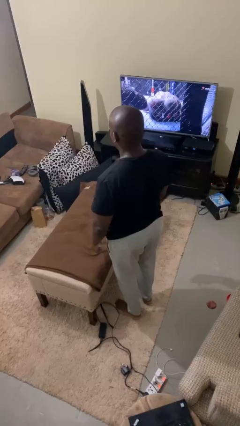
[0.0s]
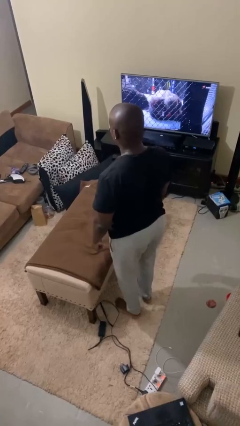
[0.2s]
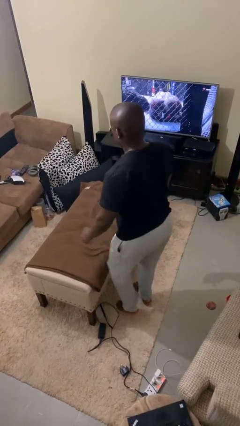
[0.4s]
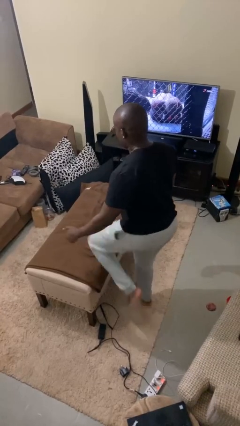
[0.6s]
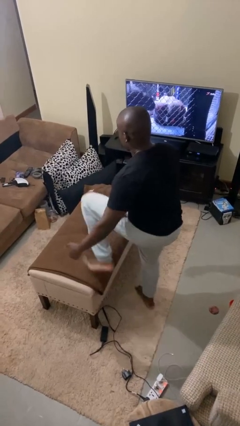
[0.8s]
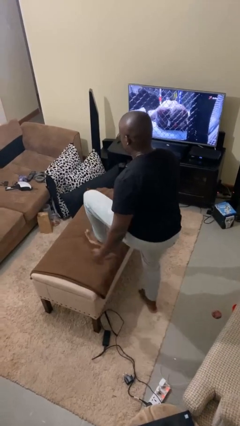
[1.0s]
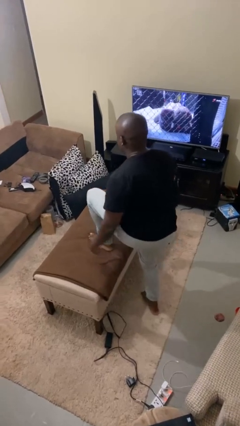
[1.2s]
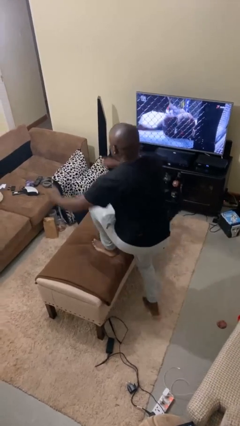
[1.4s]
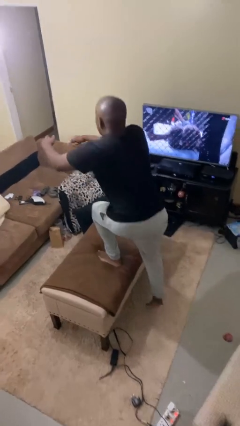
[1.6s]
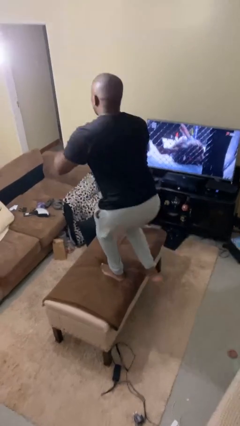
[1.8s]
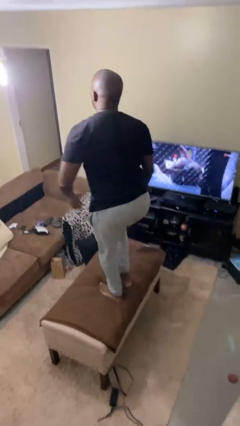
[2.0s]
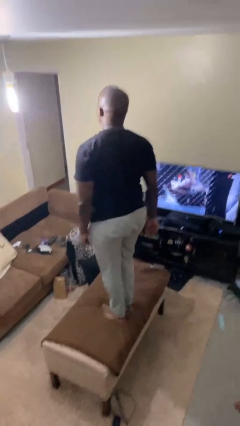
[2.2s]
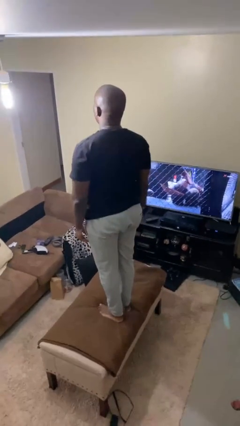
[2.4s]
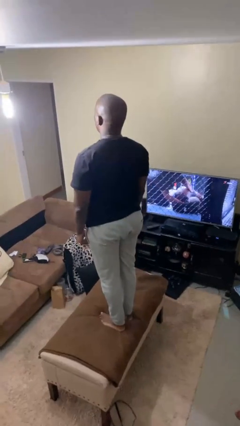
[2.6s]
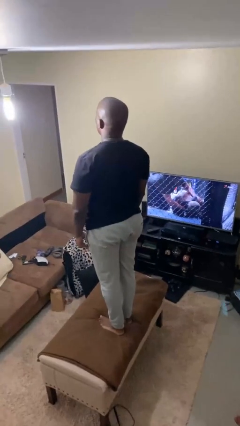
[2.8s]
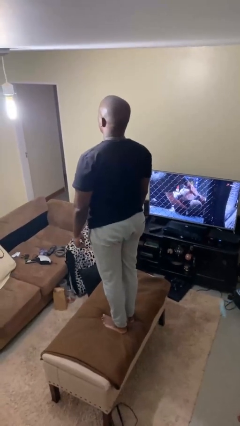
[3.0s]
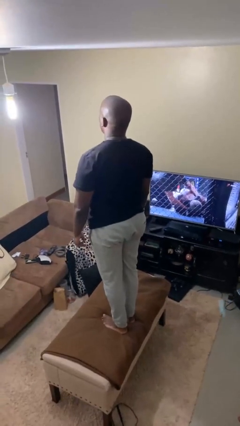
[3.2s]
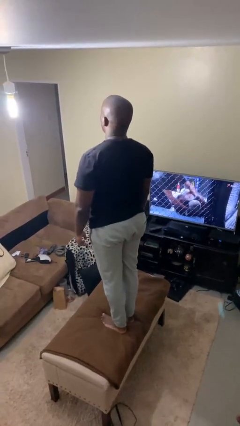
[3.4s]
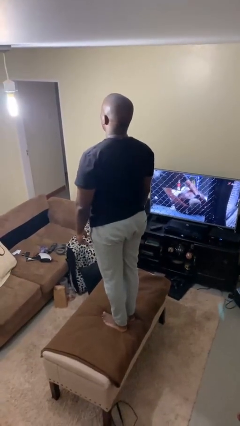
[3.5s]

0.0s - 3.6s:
person climbs on table

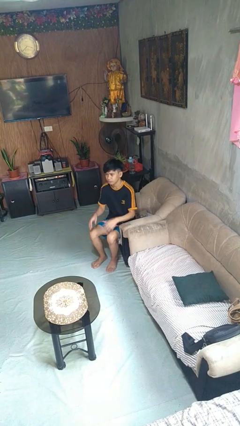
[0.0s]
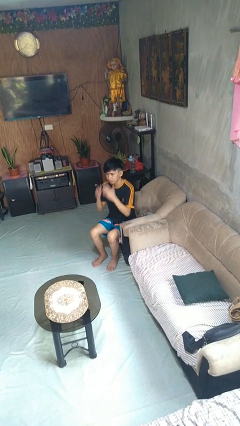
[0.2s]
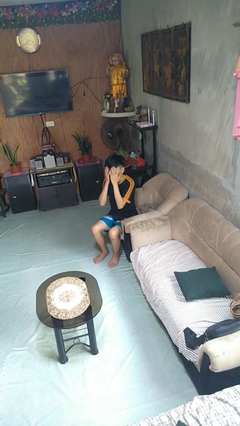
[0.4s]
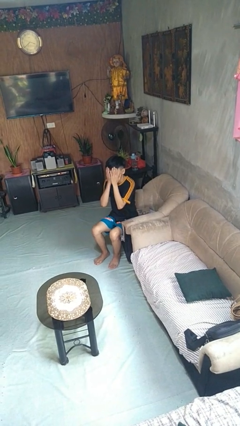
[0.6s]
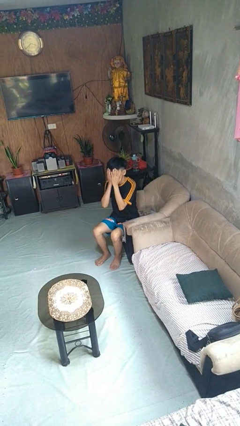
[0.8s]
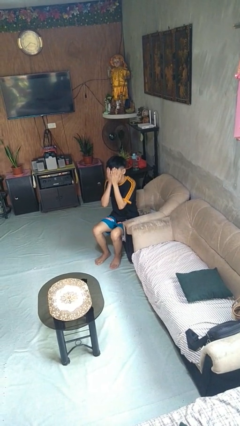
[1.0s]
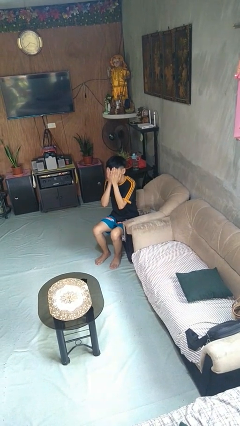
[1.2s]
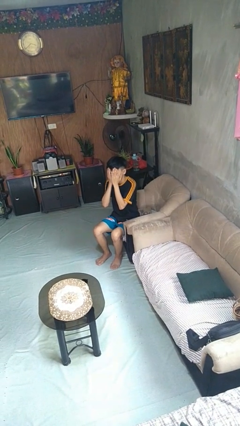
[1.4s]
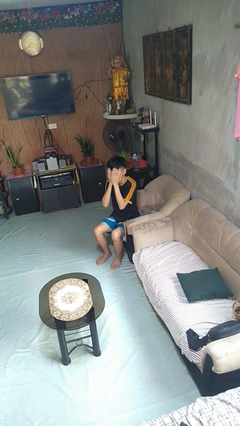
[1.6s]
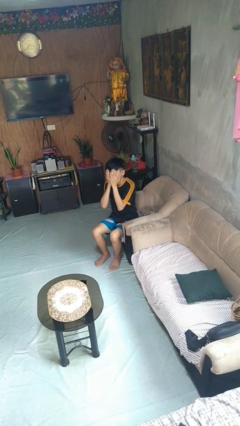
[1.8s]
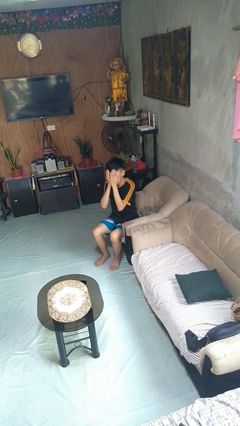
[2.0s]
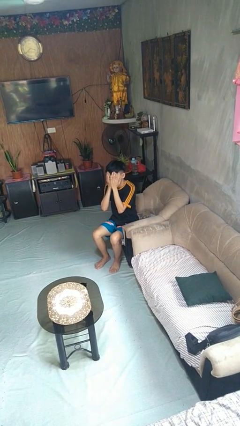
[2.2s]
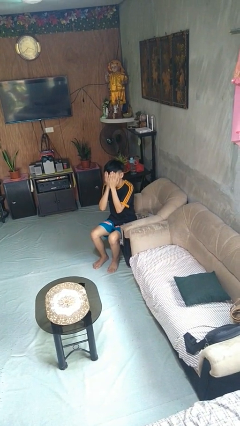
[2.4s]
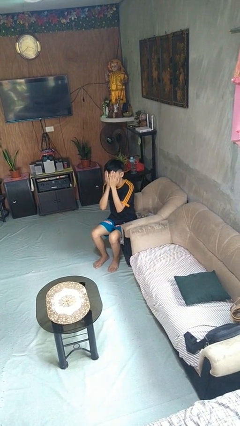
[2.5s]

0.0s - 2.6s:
person covers face with hands

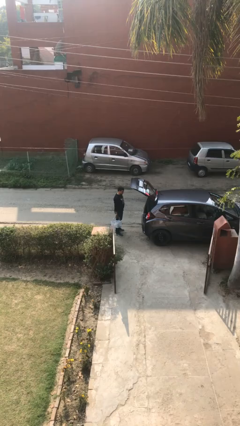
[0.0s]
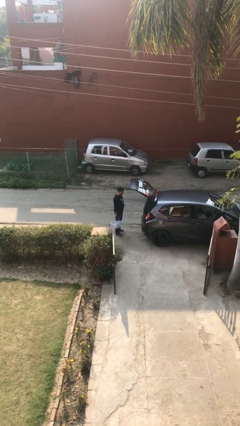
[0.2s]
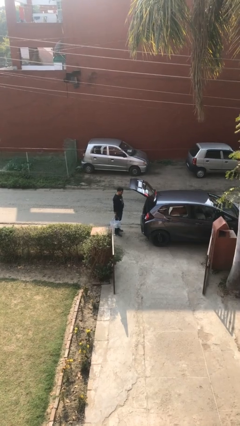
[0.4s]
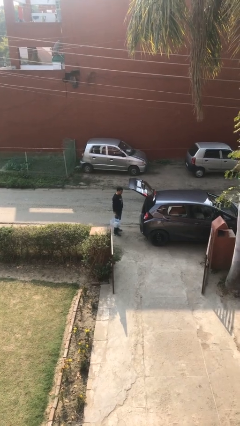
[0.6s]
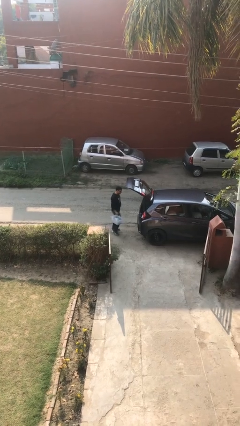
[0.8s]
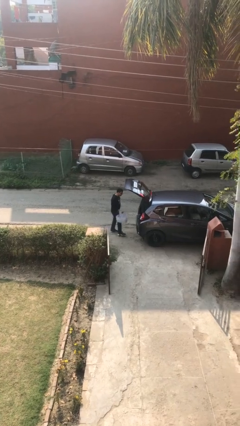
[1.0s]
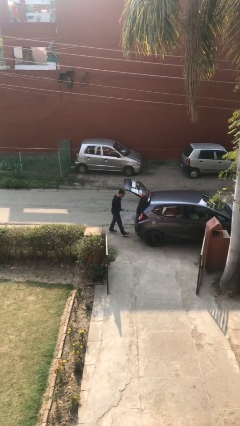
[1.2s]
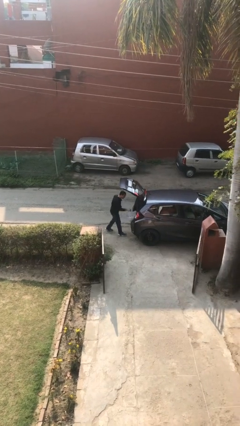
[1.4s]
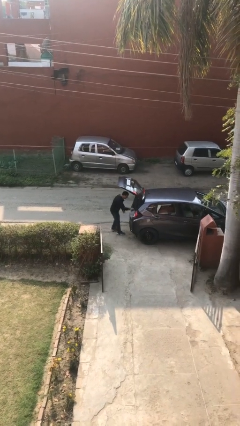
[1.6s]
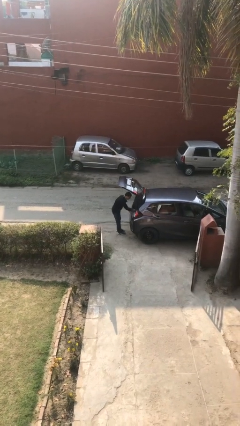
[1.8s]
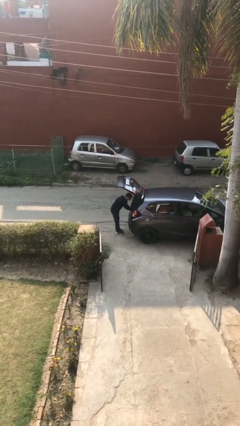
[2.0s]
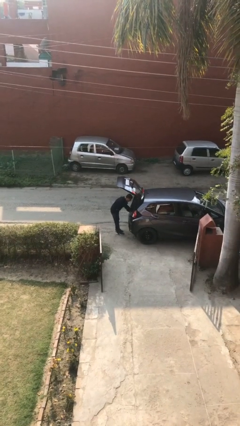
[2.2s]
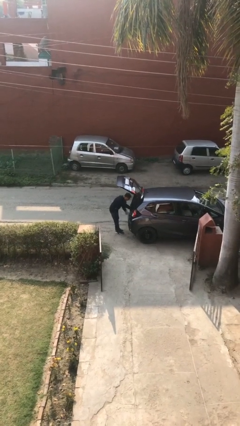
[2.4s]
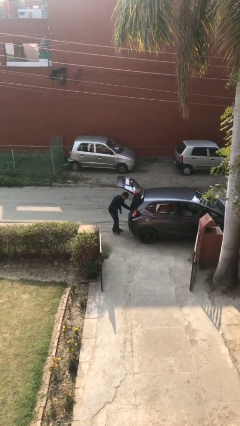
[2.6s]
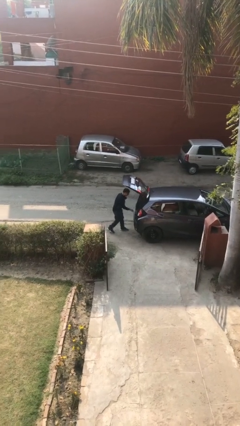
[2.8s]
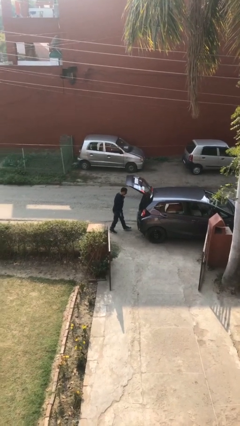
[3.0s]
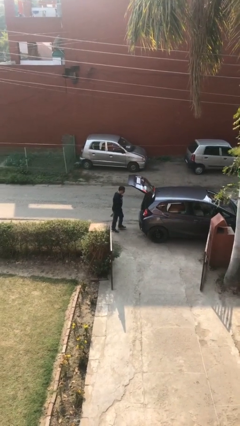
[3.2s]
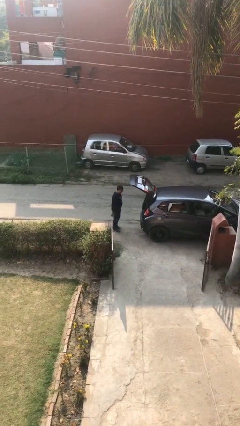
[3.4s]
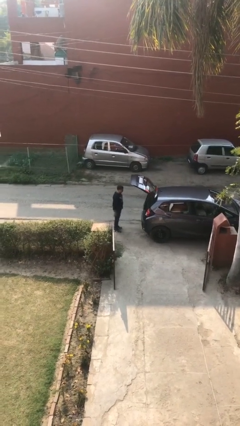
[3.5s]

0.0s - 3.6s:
person loads car

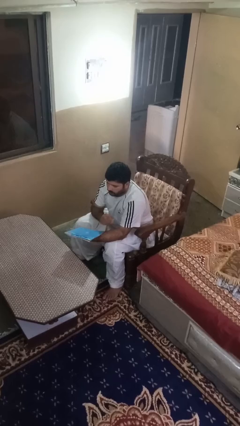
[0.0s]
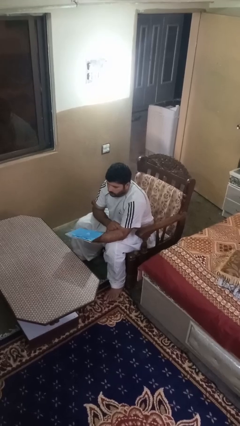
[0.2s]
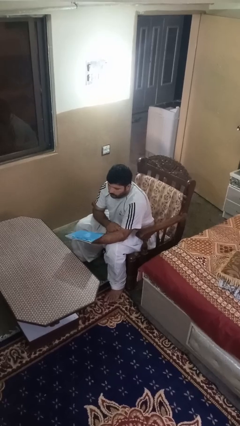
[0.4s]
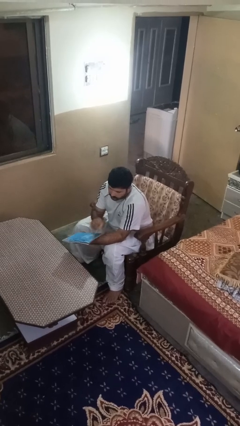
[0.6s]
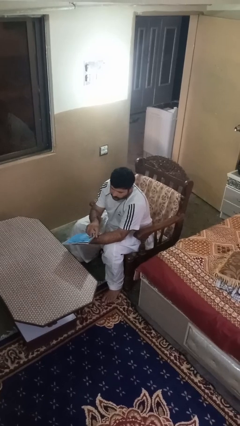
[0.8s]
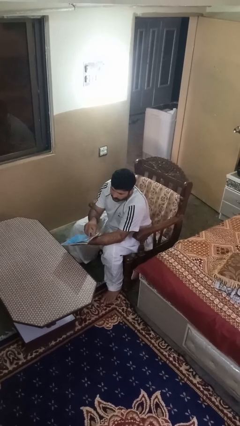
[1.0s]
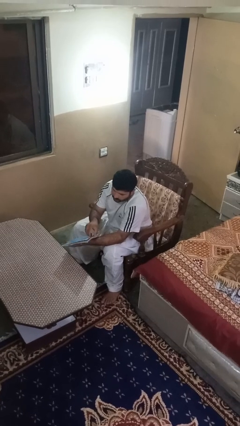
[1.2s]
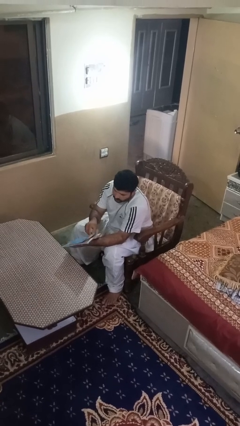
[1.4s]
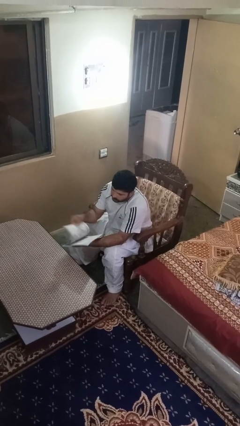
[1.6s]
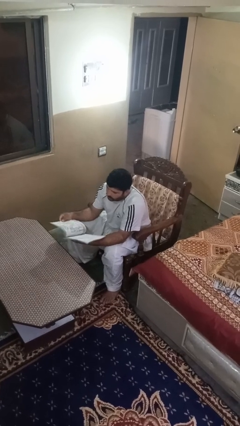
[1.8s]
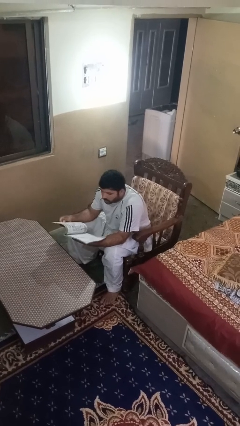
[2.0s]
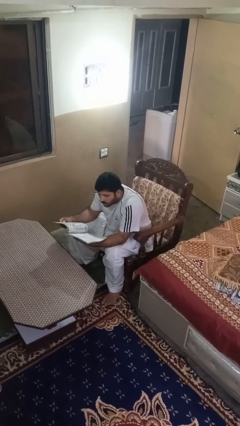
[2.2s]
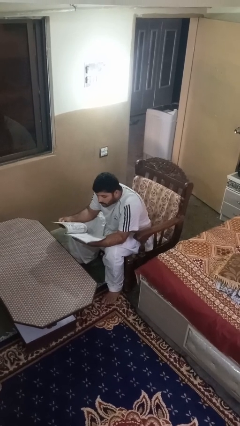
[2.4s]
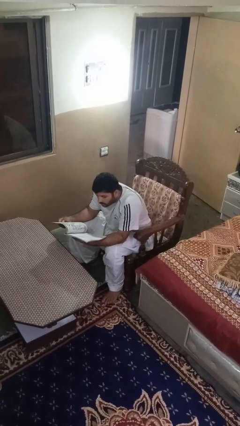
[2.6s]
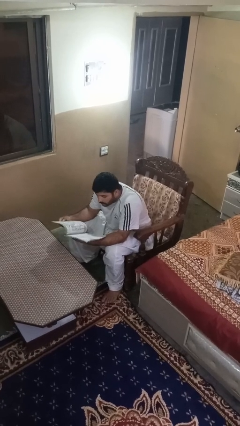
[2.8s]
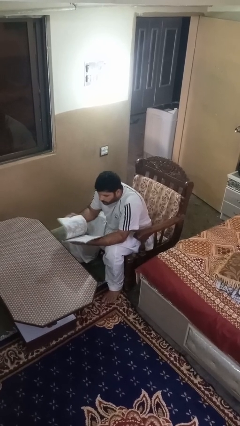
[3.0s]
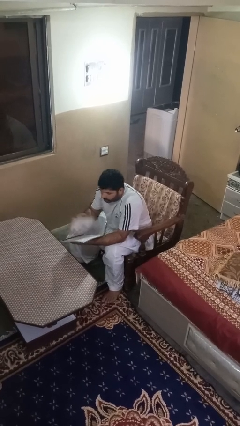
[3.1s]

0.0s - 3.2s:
person reads magazine

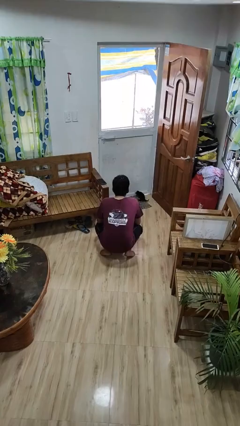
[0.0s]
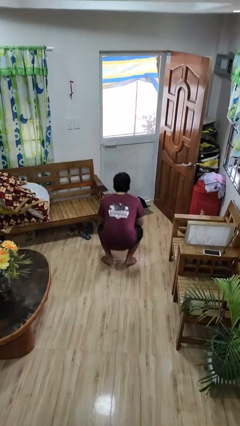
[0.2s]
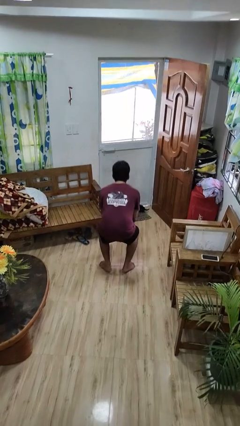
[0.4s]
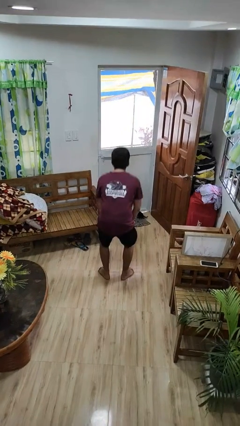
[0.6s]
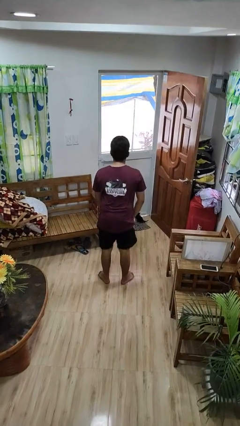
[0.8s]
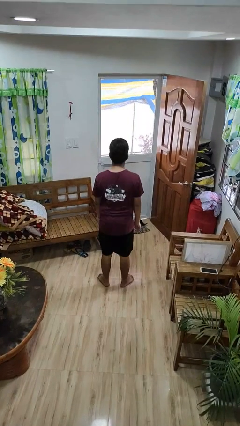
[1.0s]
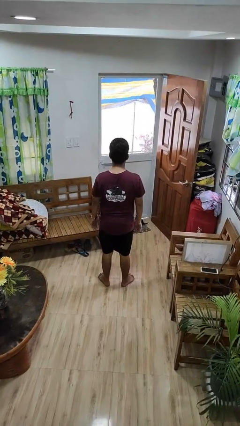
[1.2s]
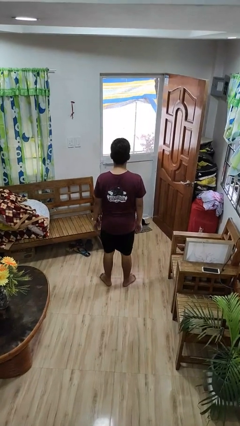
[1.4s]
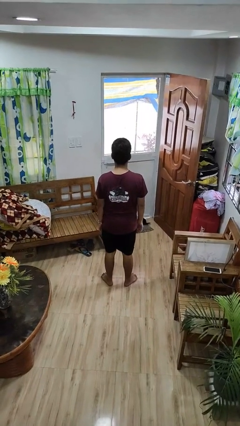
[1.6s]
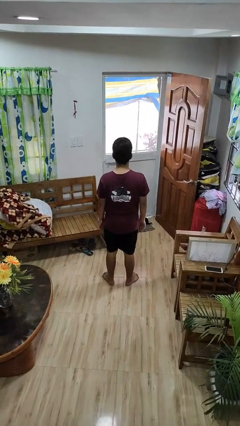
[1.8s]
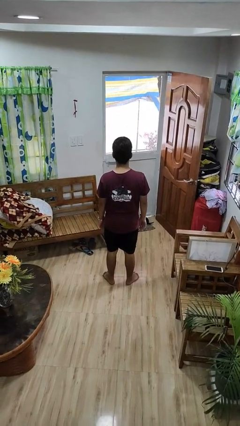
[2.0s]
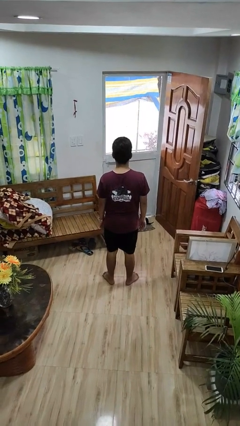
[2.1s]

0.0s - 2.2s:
person stands up

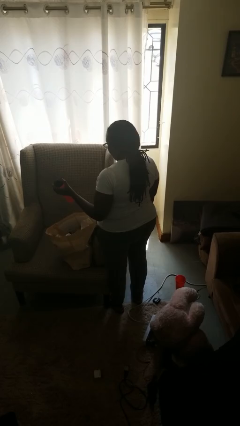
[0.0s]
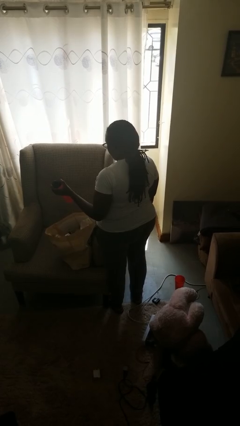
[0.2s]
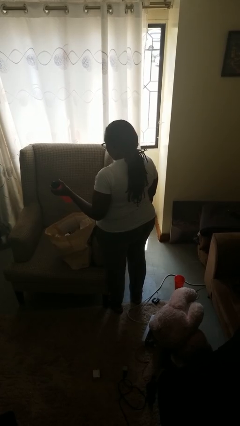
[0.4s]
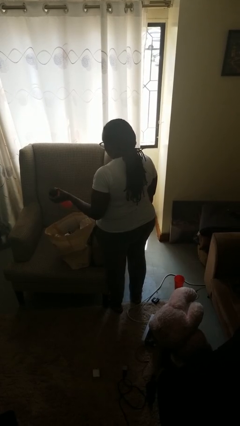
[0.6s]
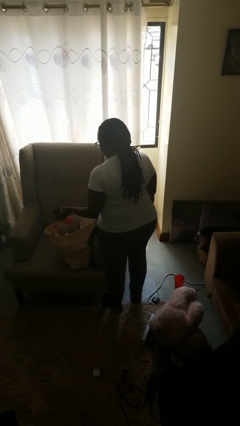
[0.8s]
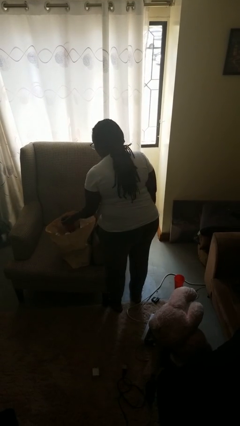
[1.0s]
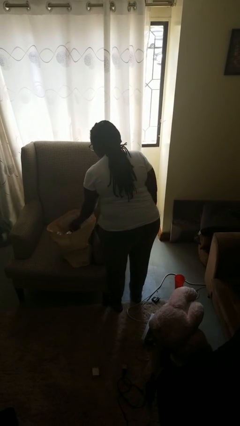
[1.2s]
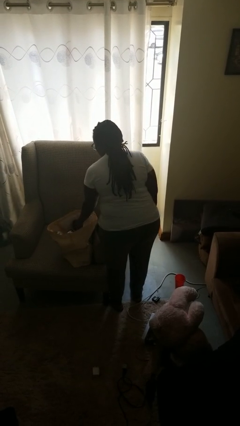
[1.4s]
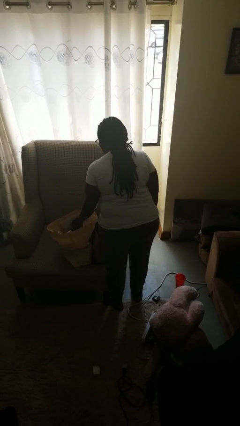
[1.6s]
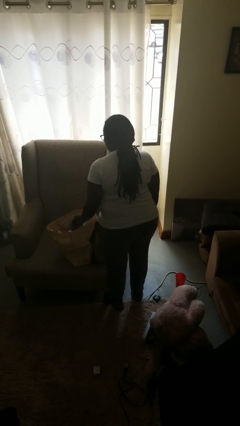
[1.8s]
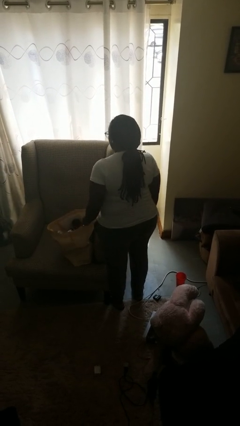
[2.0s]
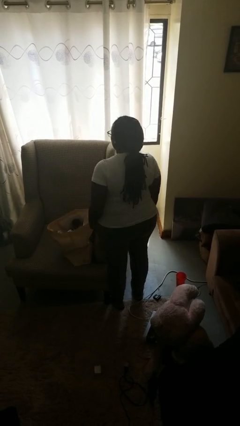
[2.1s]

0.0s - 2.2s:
person puts object into bag
